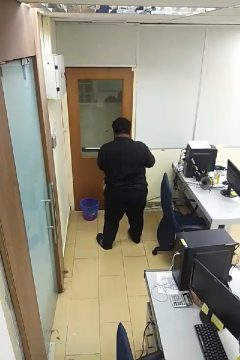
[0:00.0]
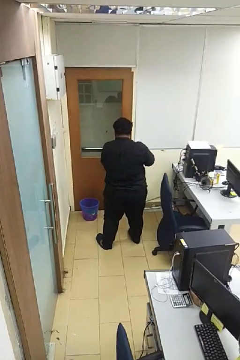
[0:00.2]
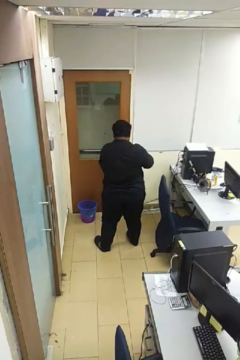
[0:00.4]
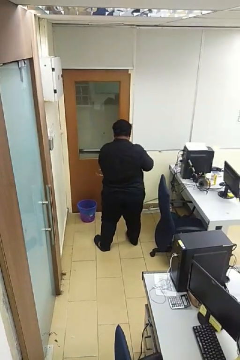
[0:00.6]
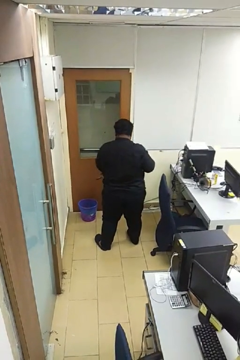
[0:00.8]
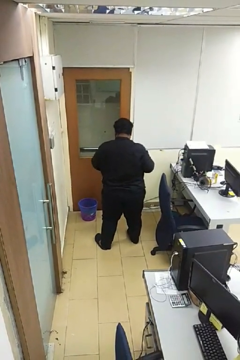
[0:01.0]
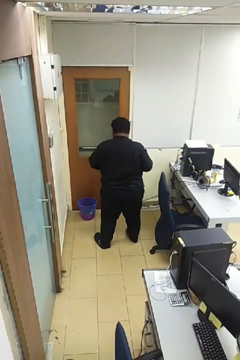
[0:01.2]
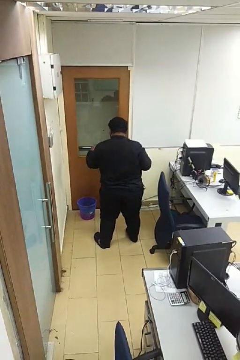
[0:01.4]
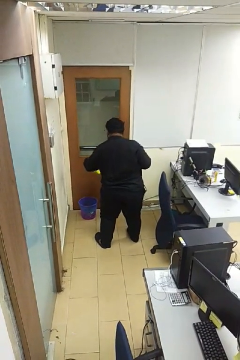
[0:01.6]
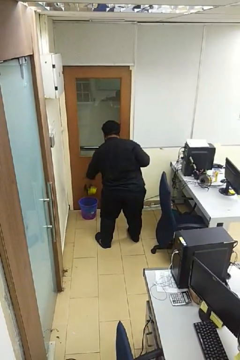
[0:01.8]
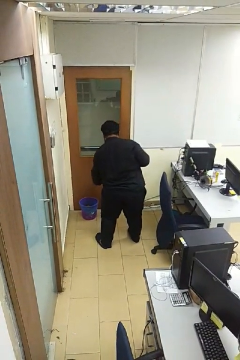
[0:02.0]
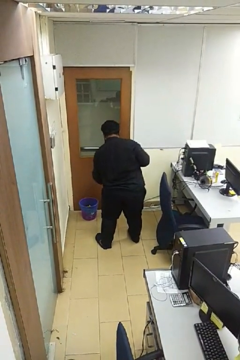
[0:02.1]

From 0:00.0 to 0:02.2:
person discards trash

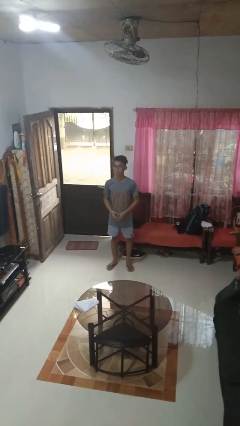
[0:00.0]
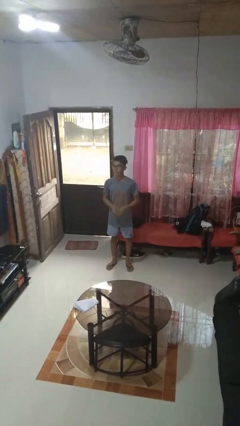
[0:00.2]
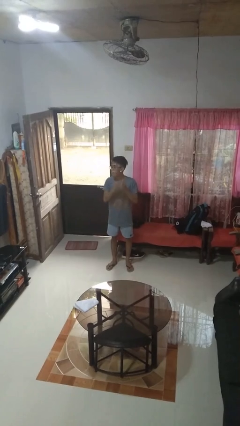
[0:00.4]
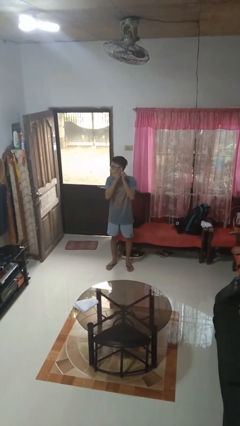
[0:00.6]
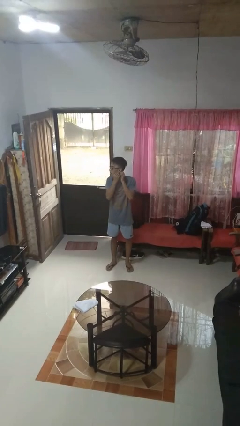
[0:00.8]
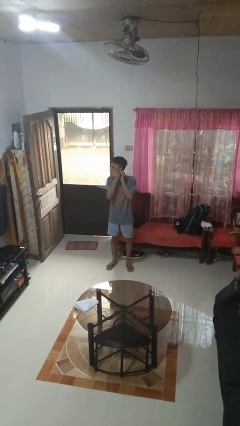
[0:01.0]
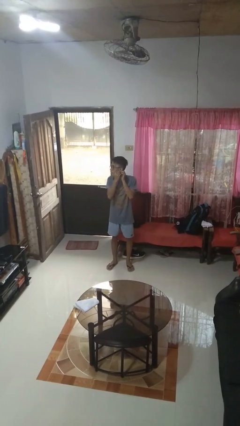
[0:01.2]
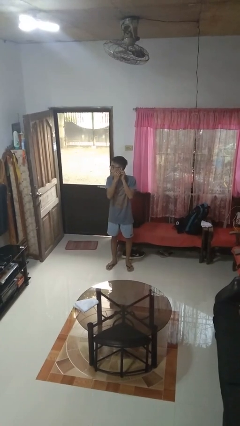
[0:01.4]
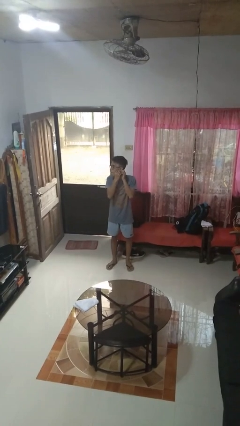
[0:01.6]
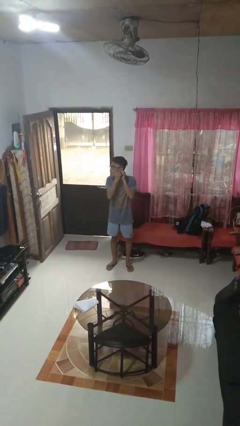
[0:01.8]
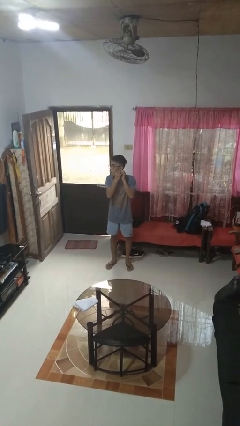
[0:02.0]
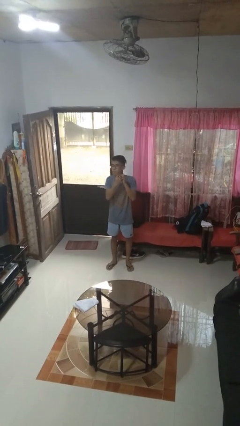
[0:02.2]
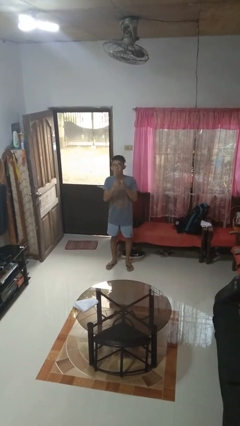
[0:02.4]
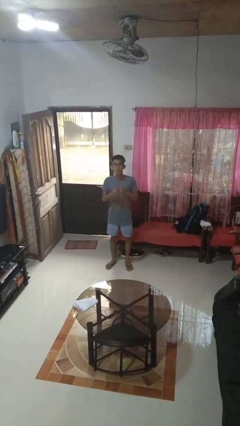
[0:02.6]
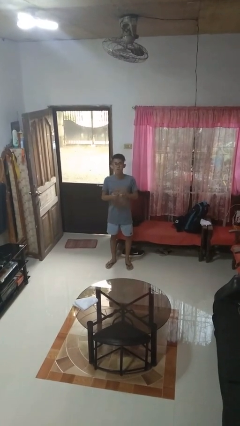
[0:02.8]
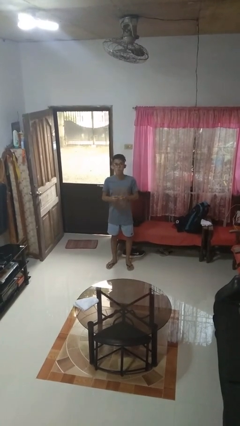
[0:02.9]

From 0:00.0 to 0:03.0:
person takes off earrings

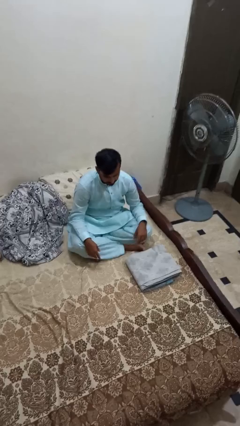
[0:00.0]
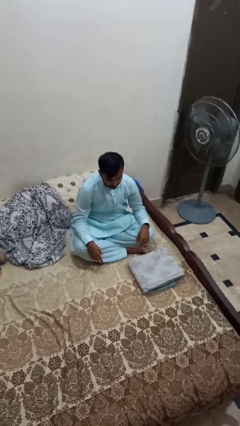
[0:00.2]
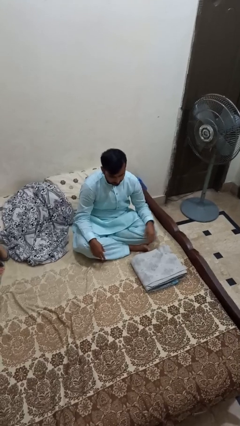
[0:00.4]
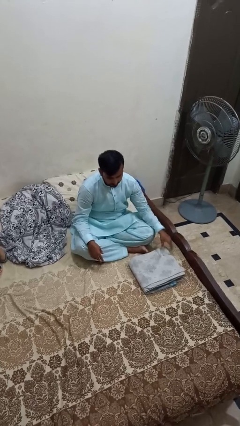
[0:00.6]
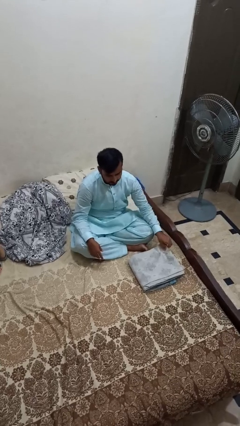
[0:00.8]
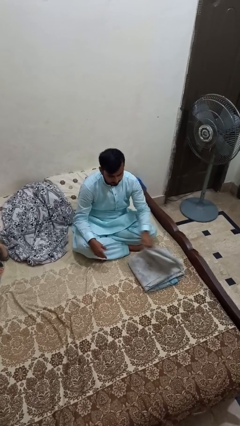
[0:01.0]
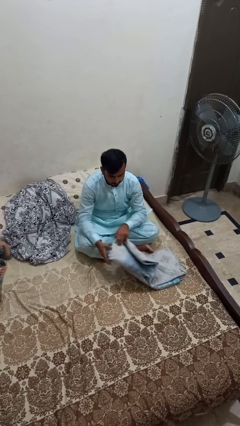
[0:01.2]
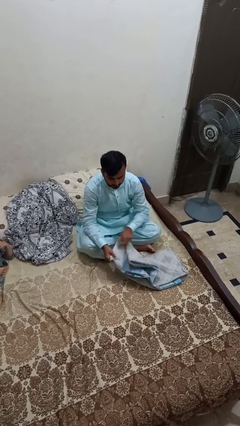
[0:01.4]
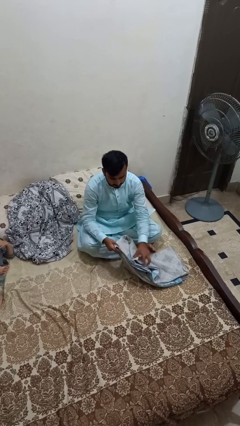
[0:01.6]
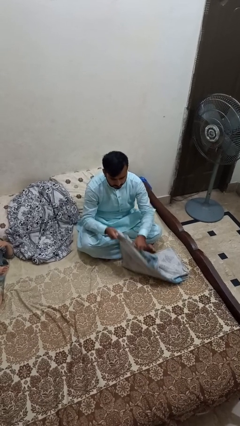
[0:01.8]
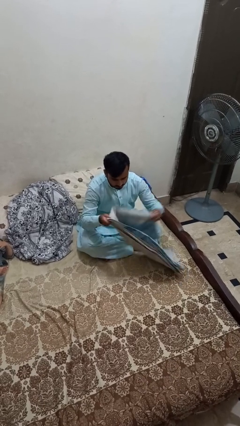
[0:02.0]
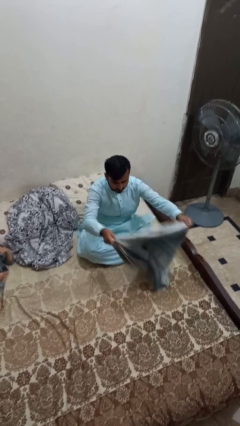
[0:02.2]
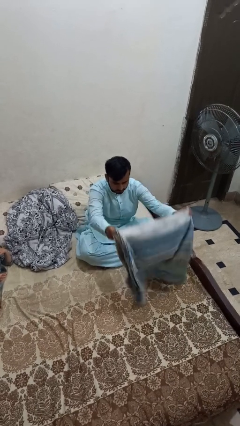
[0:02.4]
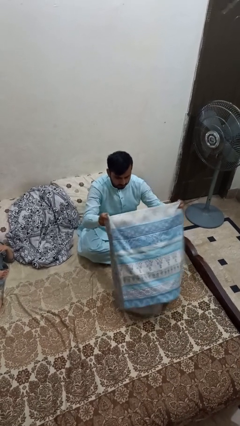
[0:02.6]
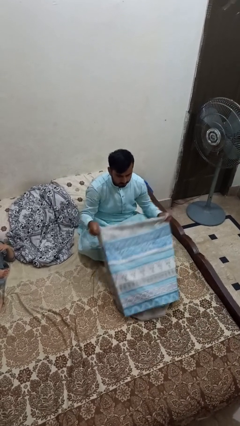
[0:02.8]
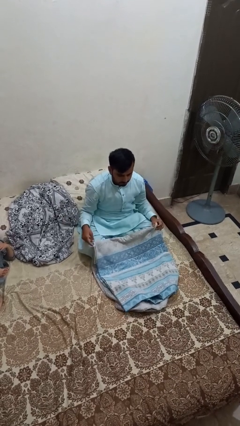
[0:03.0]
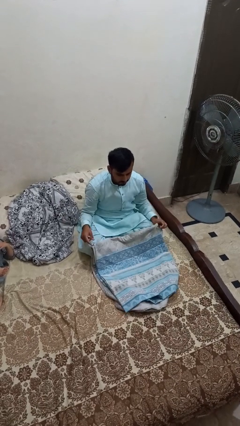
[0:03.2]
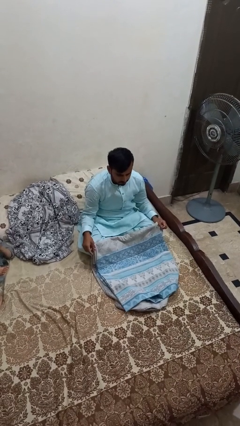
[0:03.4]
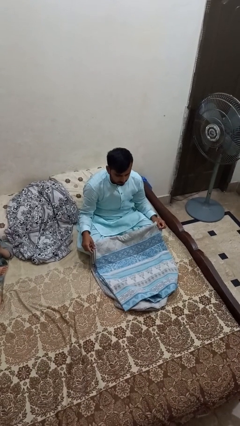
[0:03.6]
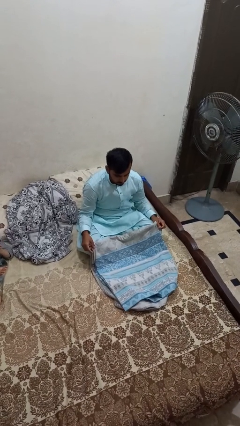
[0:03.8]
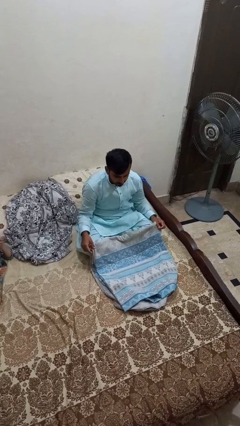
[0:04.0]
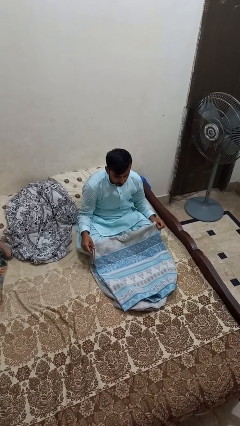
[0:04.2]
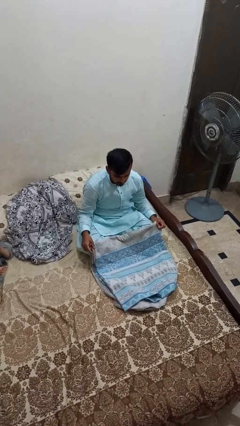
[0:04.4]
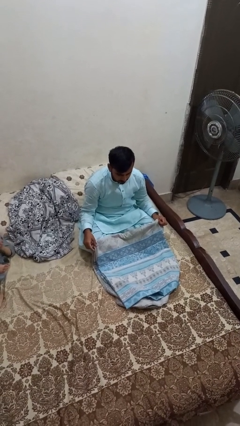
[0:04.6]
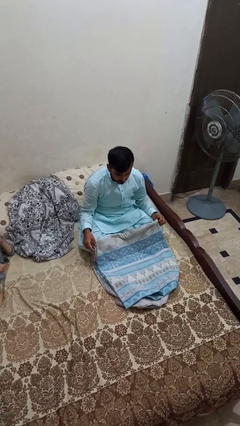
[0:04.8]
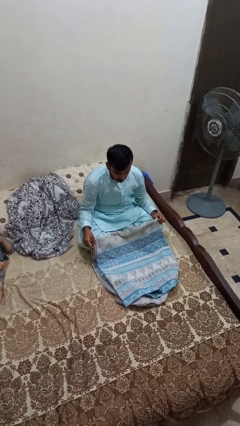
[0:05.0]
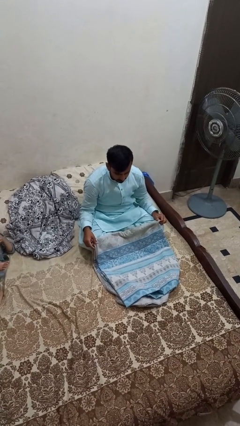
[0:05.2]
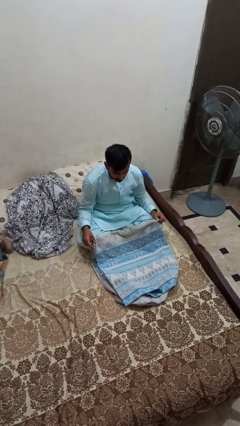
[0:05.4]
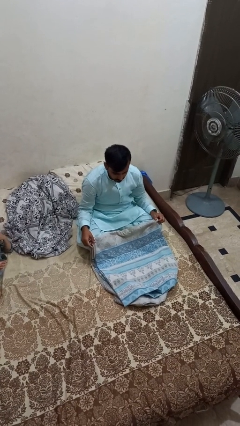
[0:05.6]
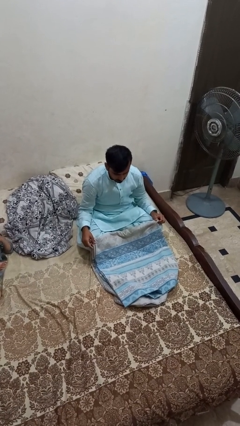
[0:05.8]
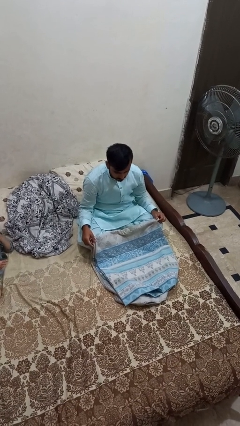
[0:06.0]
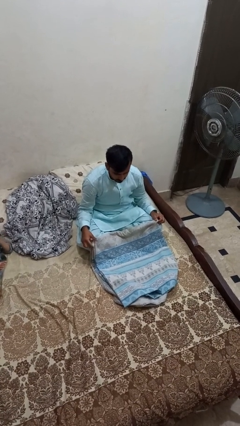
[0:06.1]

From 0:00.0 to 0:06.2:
person unfolds blanket

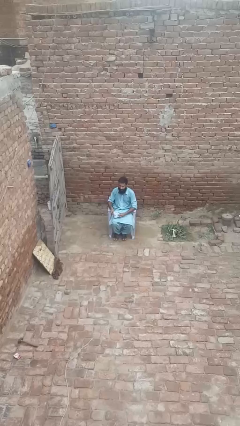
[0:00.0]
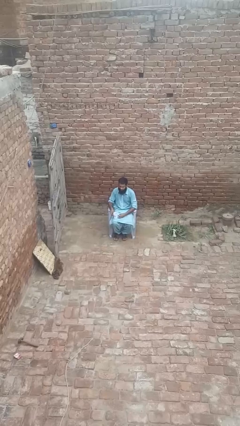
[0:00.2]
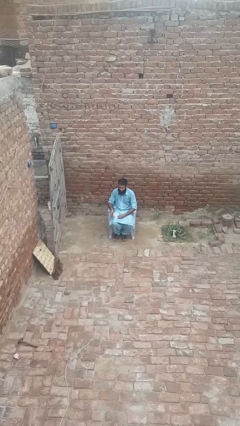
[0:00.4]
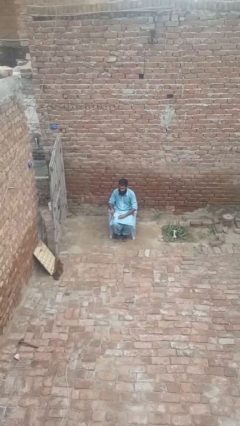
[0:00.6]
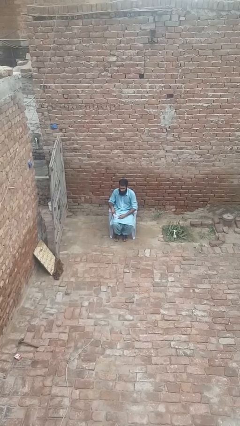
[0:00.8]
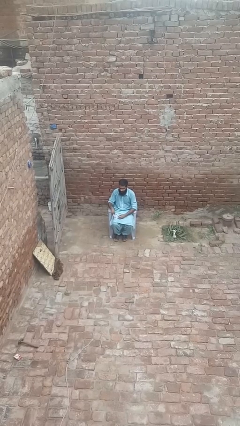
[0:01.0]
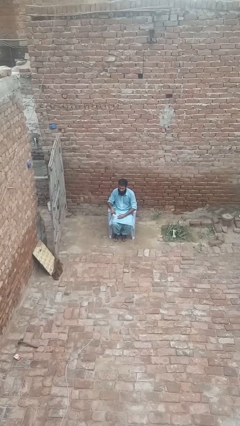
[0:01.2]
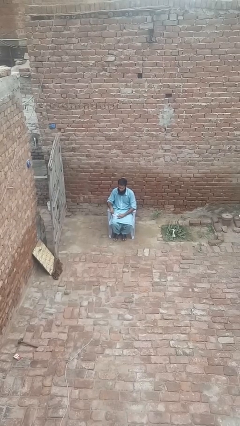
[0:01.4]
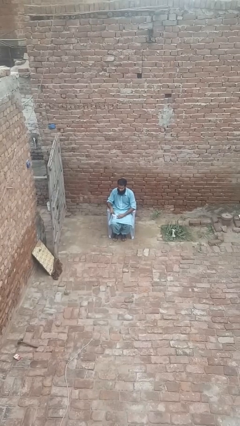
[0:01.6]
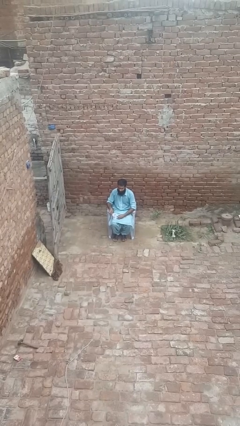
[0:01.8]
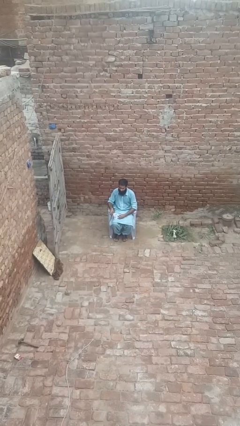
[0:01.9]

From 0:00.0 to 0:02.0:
person stirs mug

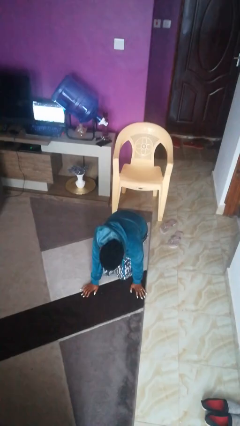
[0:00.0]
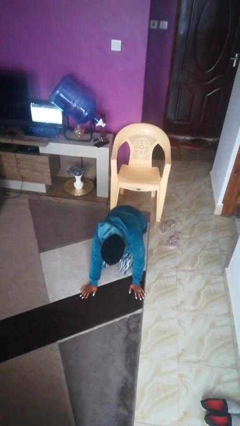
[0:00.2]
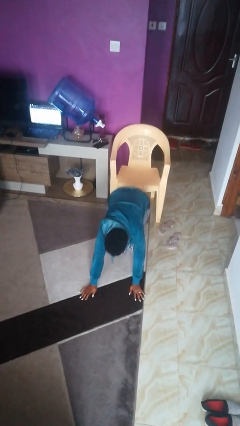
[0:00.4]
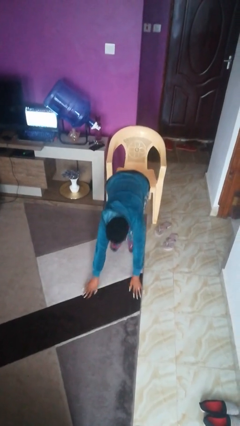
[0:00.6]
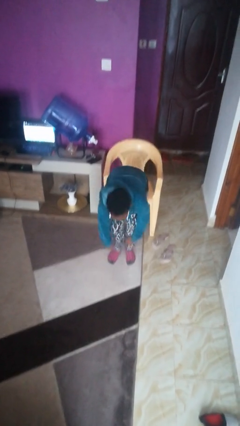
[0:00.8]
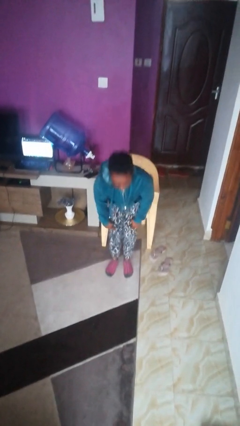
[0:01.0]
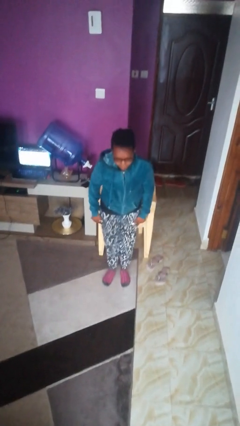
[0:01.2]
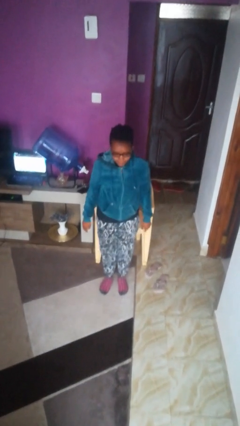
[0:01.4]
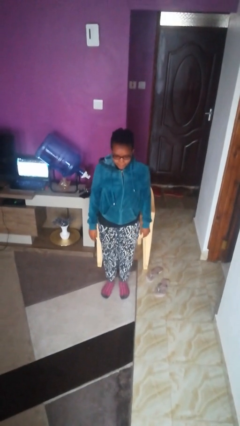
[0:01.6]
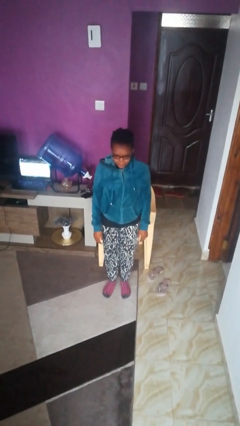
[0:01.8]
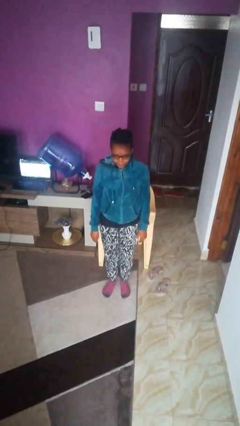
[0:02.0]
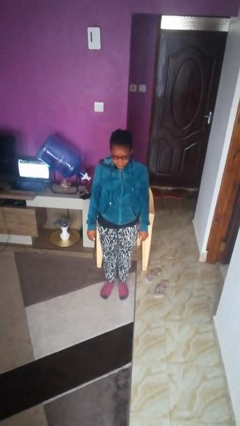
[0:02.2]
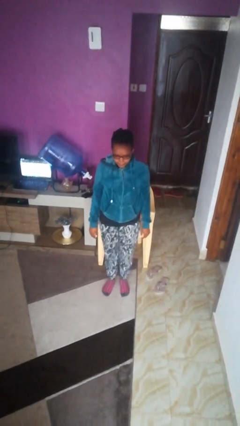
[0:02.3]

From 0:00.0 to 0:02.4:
person stands up from floor

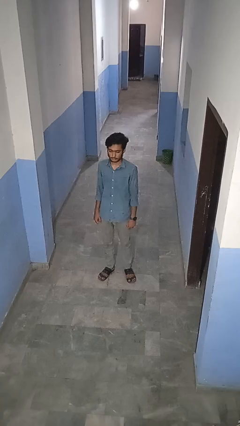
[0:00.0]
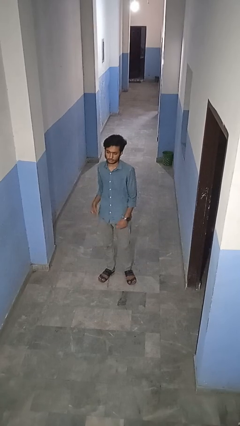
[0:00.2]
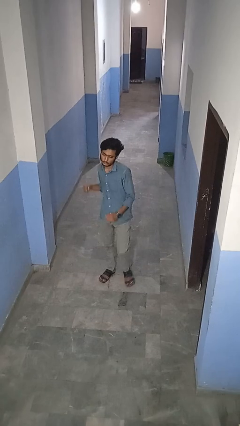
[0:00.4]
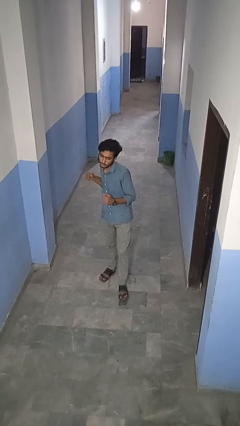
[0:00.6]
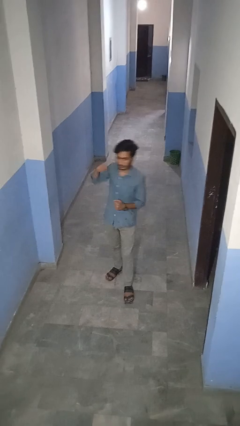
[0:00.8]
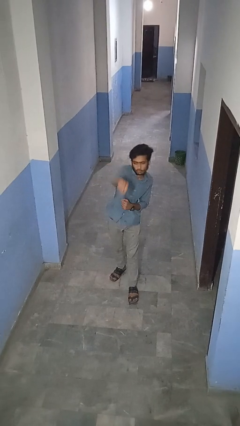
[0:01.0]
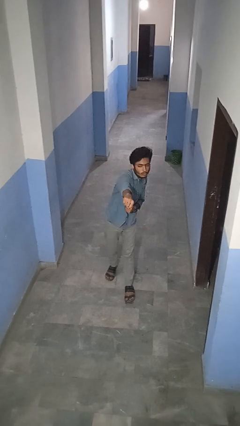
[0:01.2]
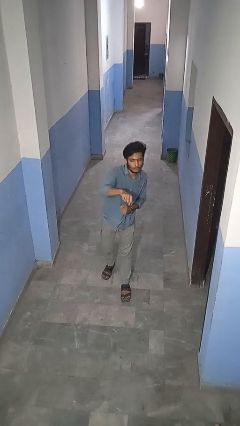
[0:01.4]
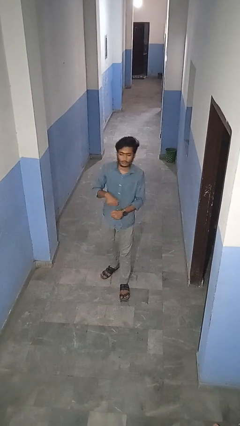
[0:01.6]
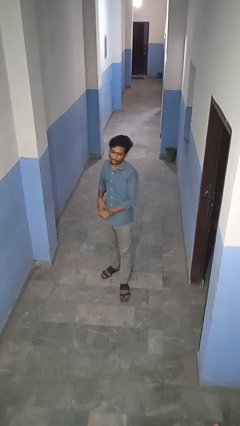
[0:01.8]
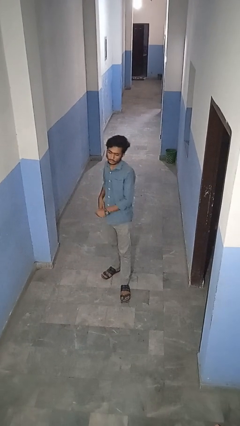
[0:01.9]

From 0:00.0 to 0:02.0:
person punches

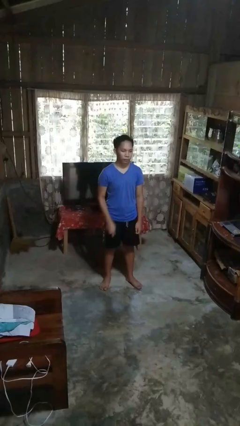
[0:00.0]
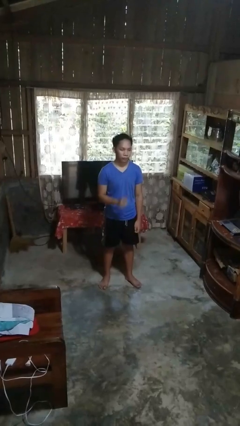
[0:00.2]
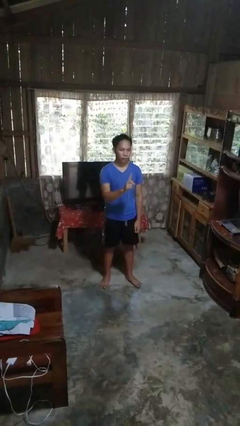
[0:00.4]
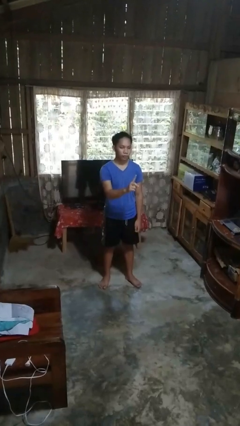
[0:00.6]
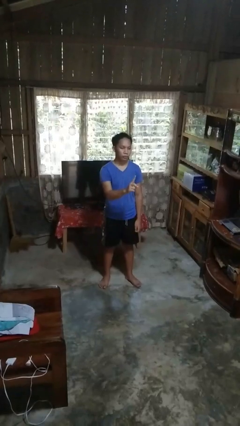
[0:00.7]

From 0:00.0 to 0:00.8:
person gestures number one
